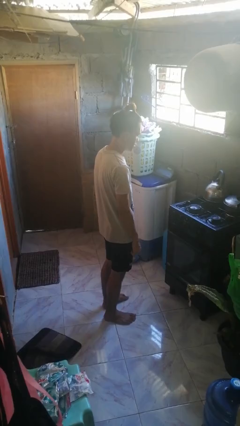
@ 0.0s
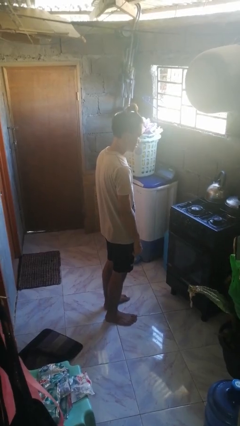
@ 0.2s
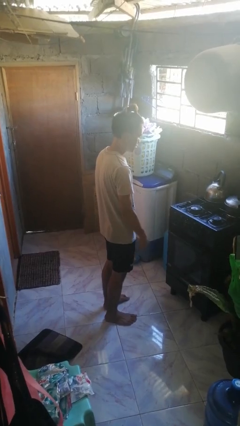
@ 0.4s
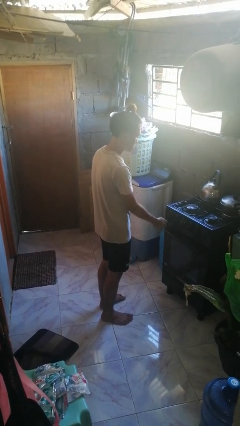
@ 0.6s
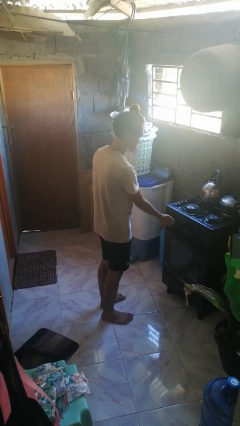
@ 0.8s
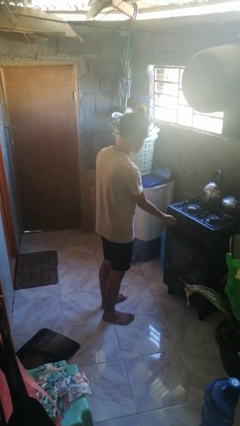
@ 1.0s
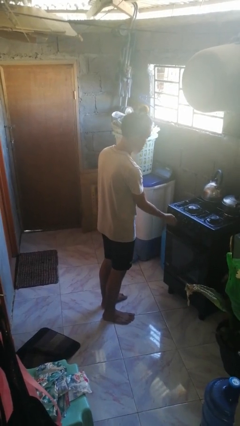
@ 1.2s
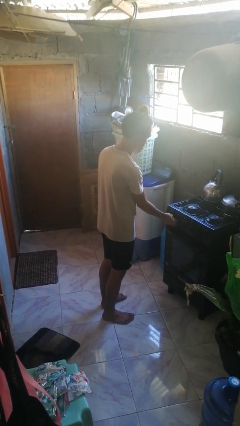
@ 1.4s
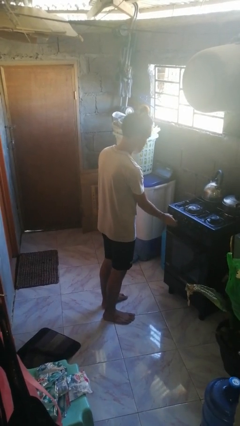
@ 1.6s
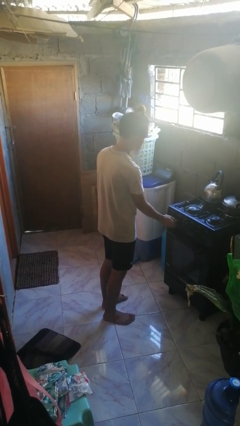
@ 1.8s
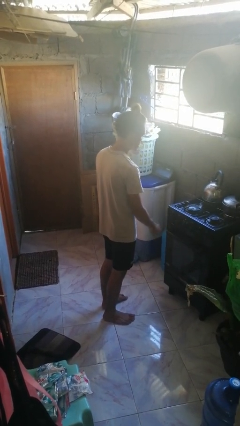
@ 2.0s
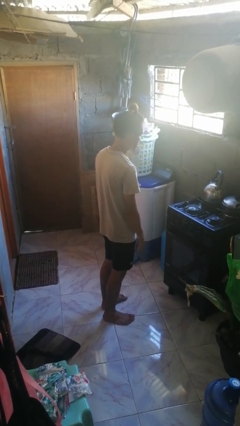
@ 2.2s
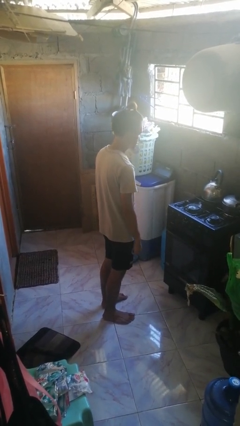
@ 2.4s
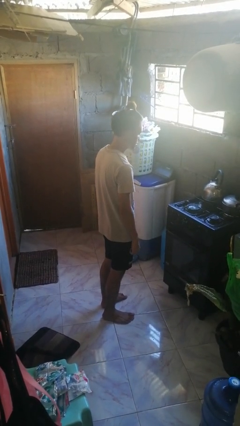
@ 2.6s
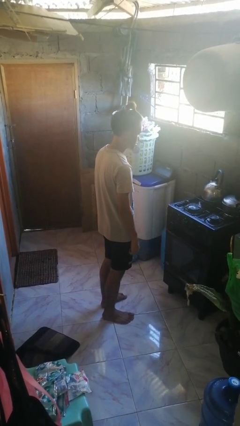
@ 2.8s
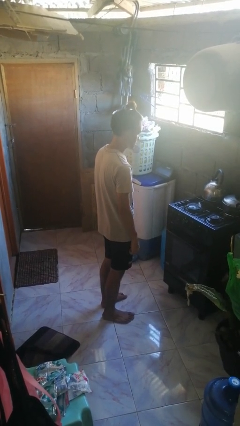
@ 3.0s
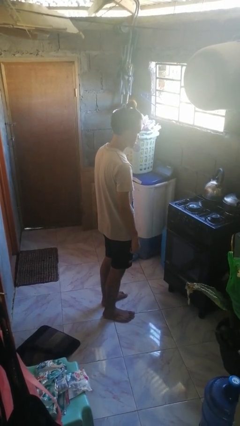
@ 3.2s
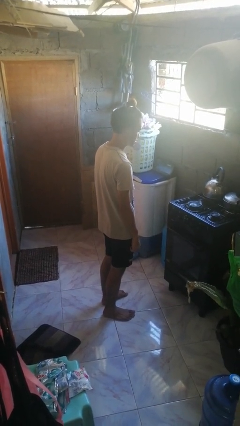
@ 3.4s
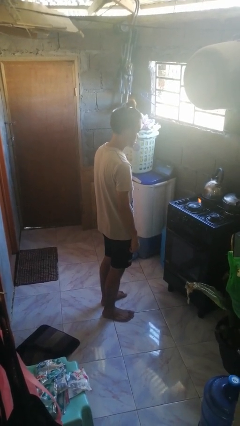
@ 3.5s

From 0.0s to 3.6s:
person turns on stovetop

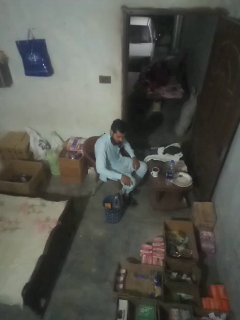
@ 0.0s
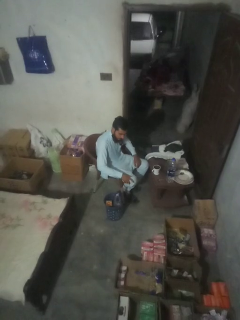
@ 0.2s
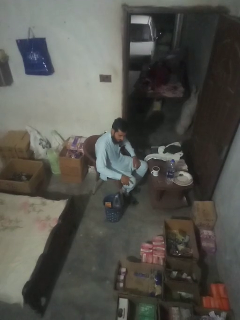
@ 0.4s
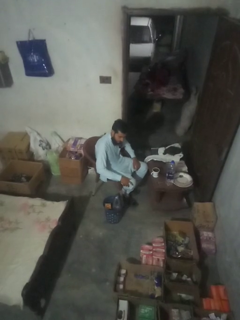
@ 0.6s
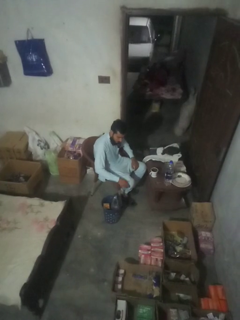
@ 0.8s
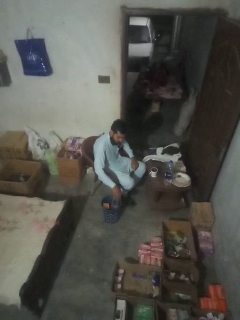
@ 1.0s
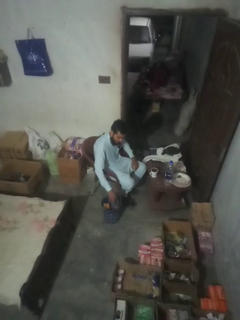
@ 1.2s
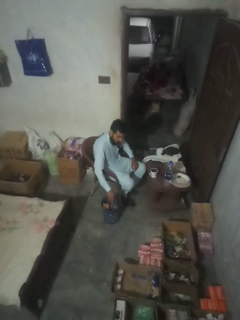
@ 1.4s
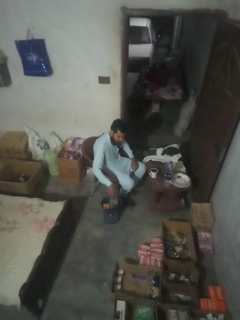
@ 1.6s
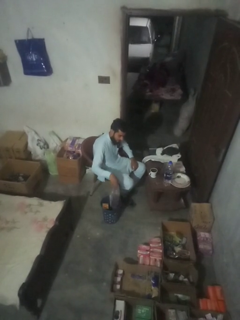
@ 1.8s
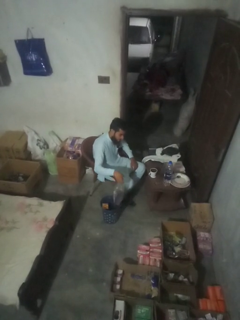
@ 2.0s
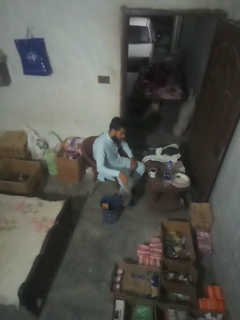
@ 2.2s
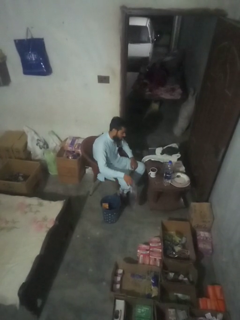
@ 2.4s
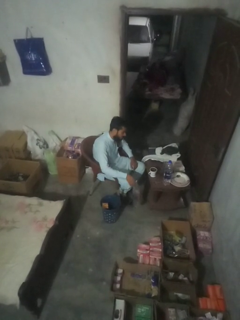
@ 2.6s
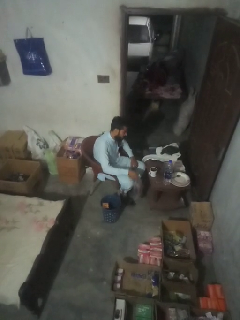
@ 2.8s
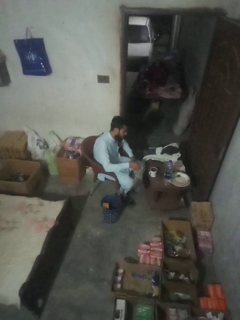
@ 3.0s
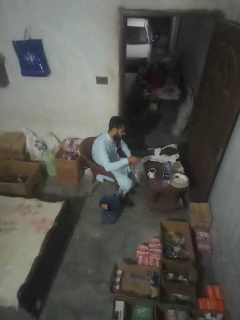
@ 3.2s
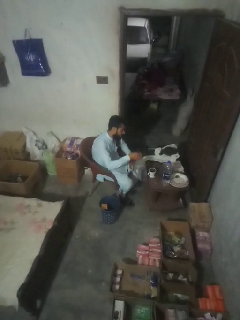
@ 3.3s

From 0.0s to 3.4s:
person inserts trashbag into trashcan

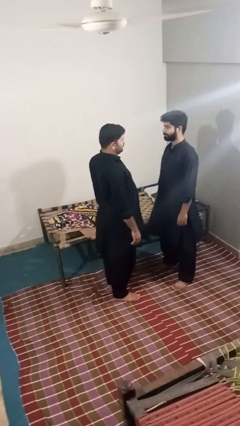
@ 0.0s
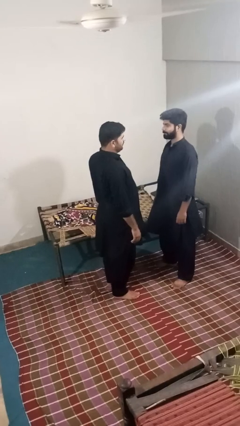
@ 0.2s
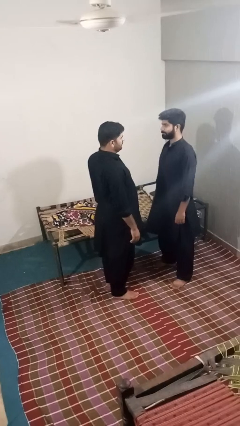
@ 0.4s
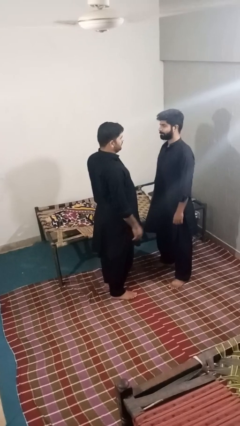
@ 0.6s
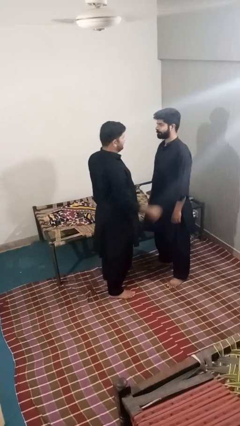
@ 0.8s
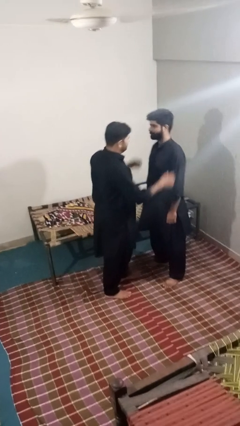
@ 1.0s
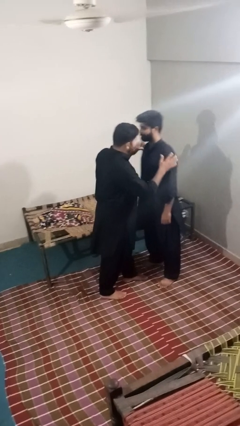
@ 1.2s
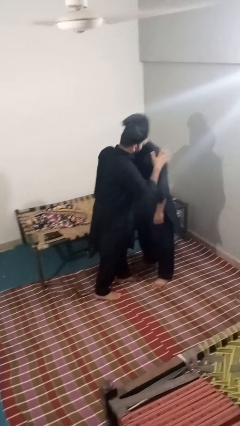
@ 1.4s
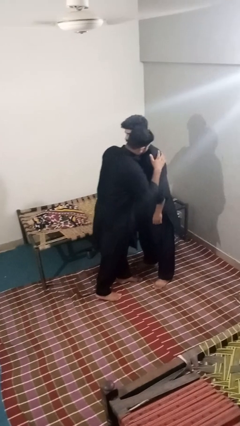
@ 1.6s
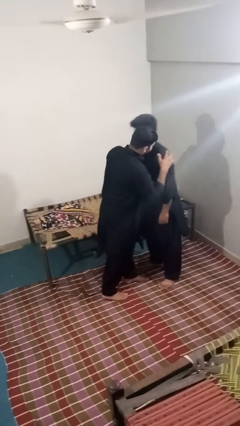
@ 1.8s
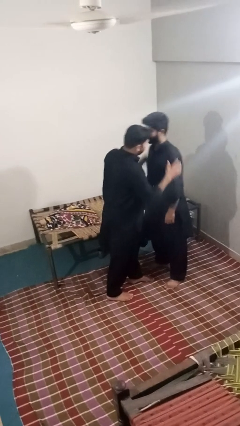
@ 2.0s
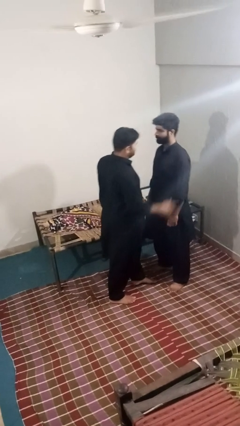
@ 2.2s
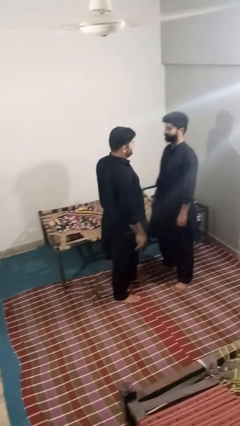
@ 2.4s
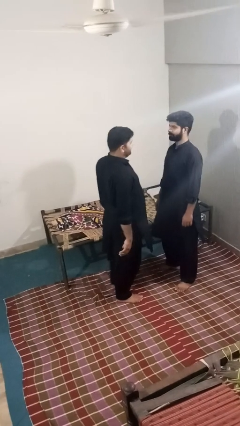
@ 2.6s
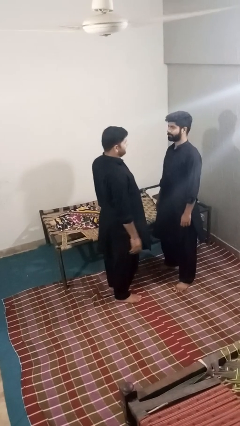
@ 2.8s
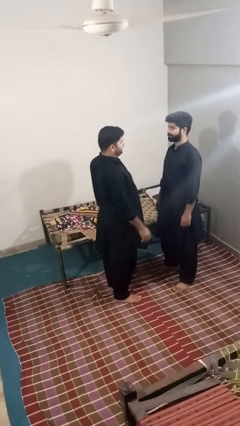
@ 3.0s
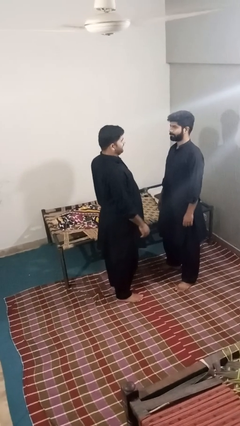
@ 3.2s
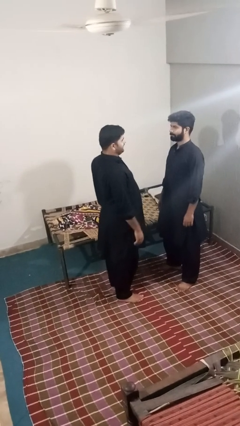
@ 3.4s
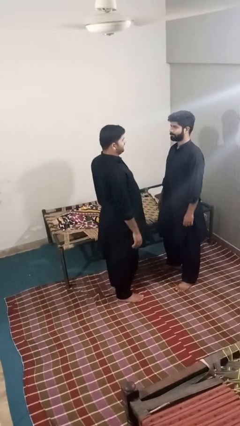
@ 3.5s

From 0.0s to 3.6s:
person kisses cheek of person

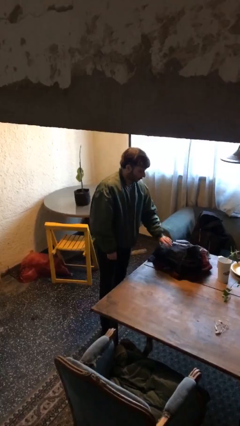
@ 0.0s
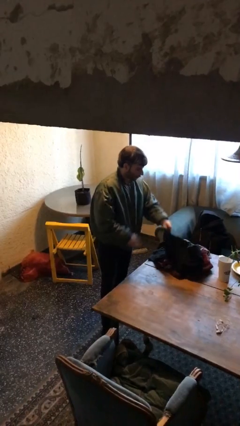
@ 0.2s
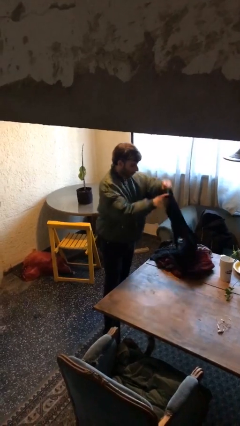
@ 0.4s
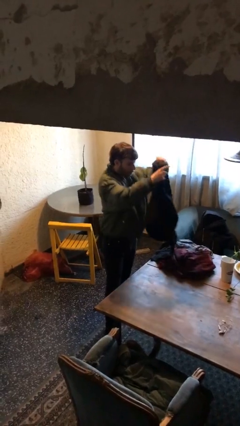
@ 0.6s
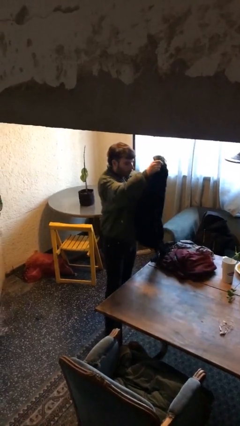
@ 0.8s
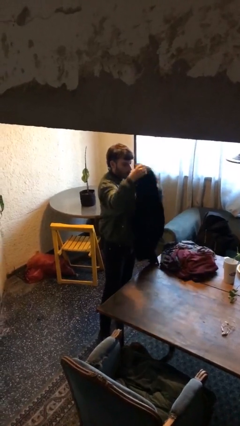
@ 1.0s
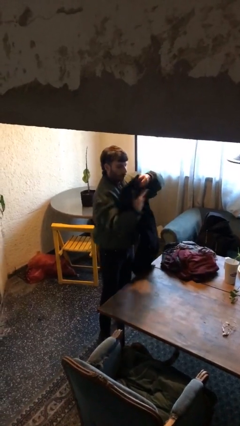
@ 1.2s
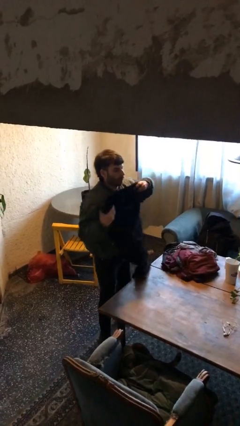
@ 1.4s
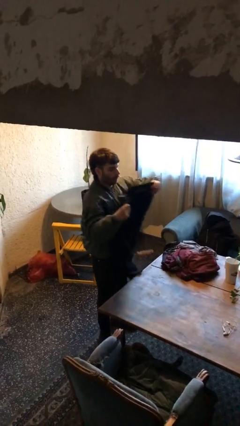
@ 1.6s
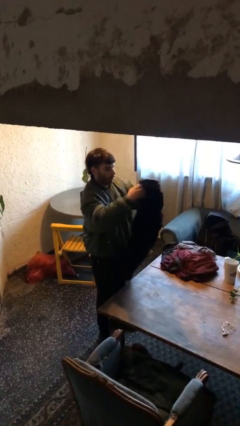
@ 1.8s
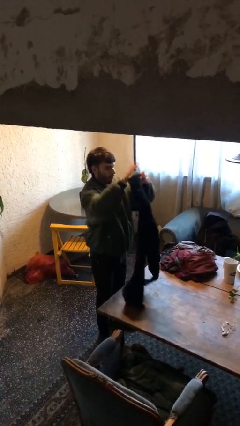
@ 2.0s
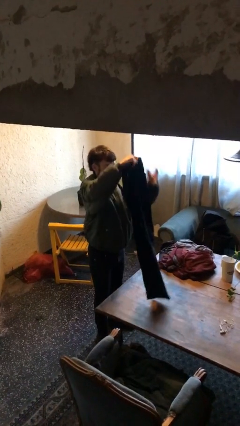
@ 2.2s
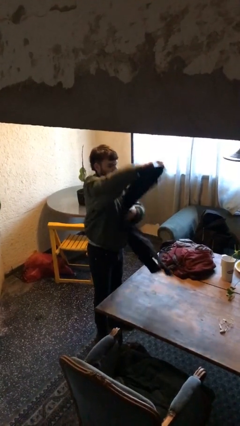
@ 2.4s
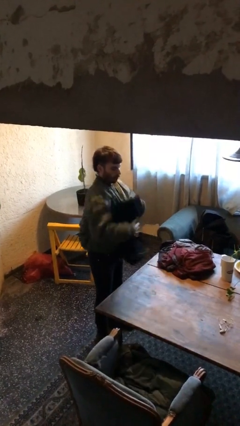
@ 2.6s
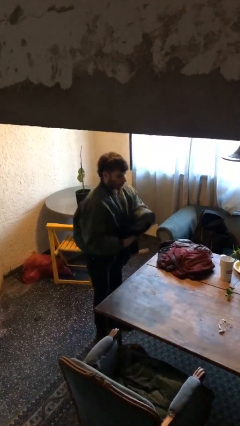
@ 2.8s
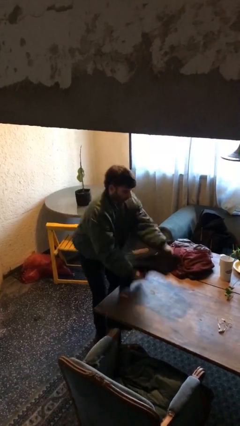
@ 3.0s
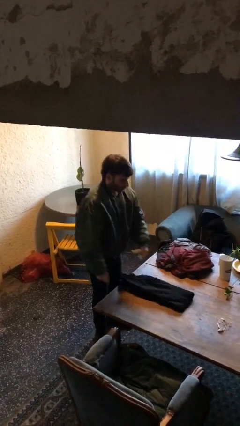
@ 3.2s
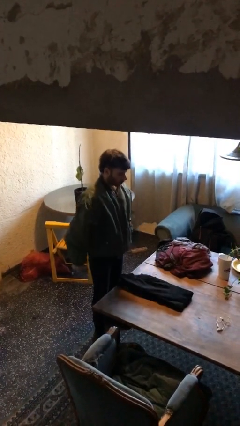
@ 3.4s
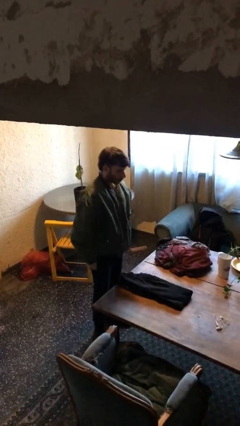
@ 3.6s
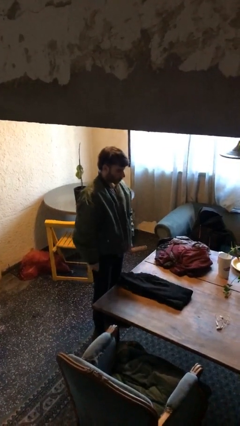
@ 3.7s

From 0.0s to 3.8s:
person folds pants

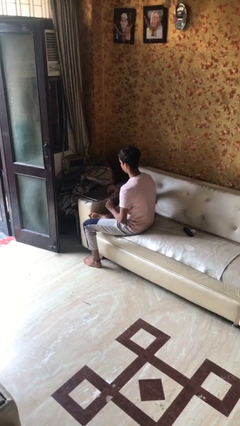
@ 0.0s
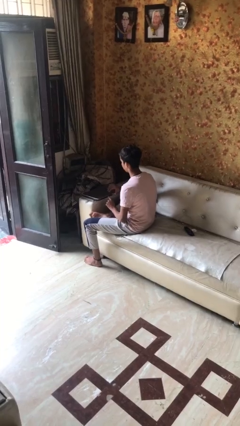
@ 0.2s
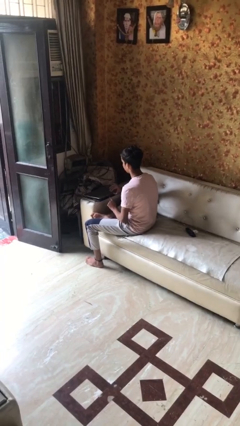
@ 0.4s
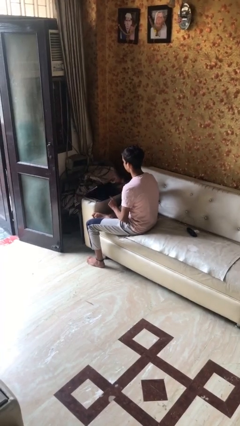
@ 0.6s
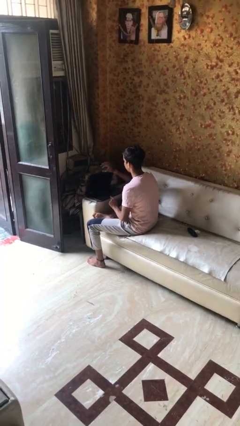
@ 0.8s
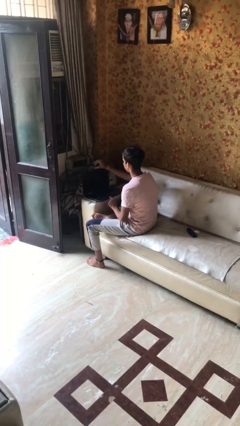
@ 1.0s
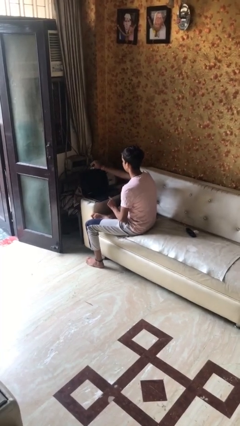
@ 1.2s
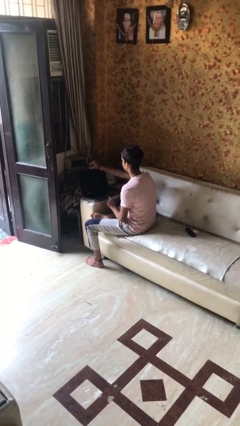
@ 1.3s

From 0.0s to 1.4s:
person opens laptop

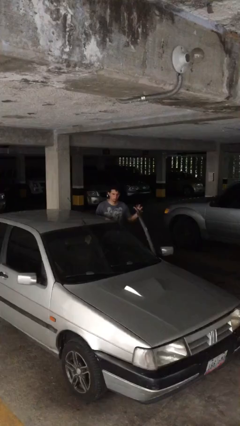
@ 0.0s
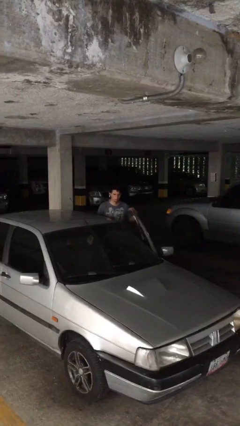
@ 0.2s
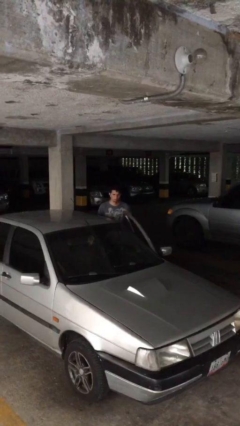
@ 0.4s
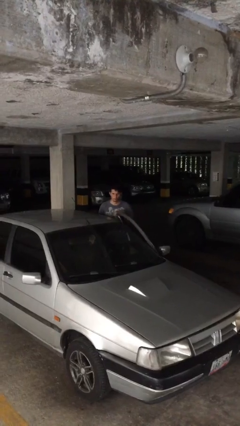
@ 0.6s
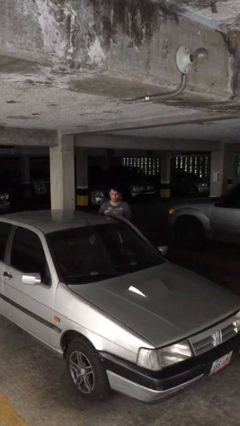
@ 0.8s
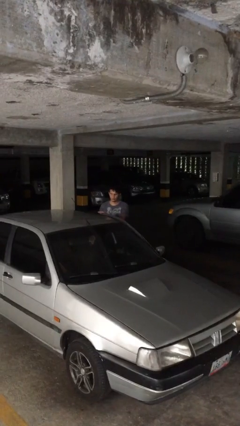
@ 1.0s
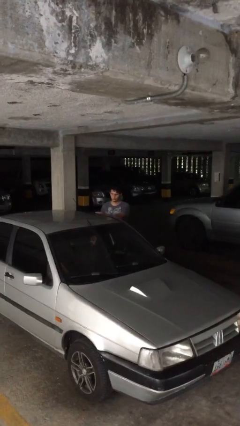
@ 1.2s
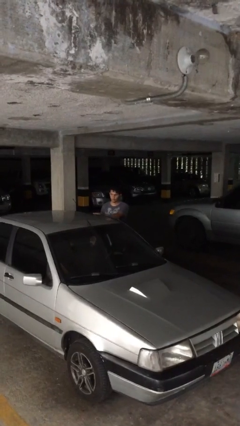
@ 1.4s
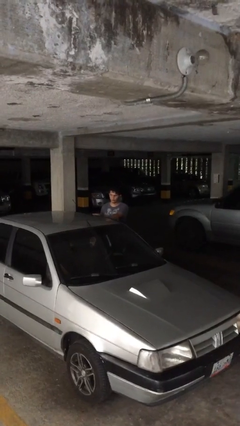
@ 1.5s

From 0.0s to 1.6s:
person closes car door

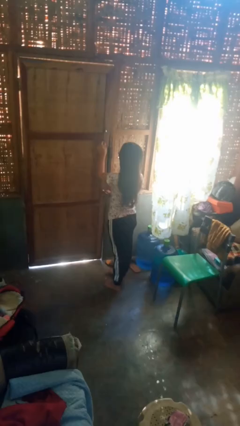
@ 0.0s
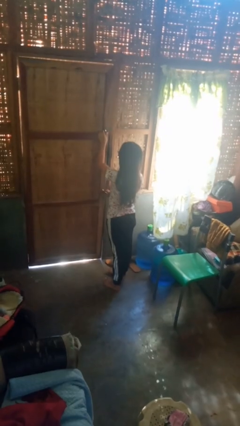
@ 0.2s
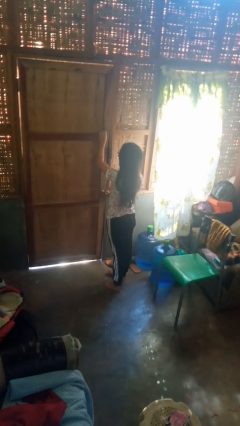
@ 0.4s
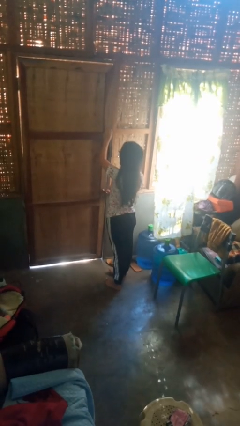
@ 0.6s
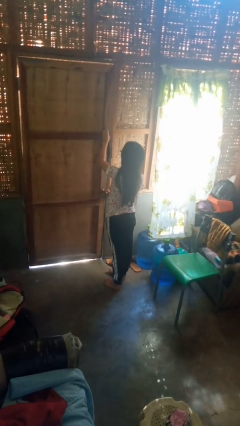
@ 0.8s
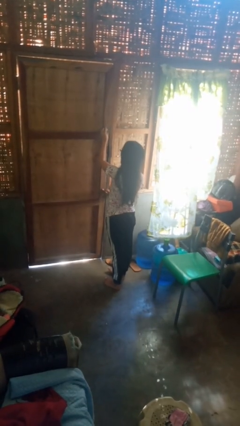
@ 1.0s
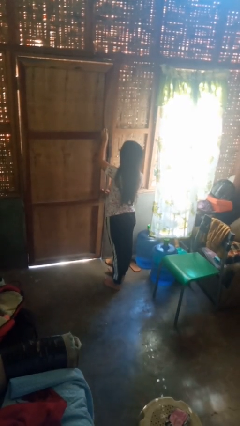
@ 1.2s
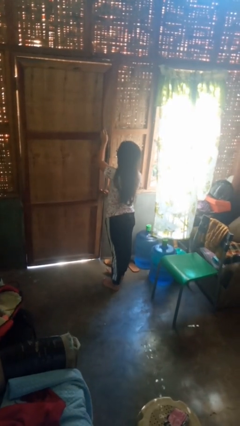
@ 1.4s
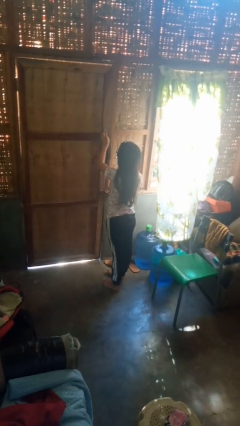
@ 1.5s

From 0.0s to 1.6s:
person locks door with keys
